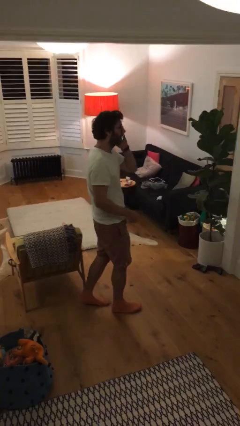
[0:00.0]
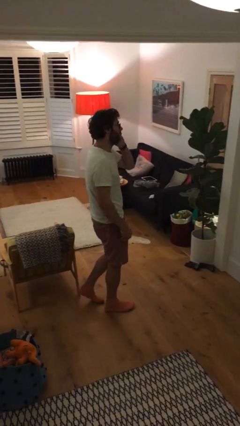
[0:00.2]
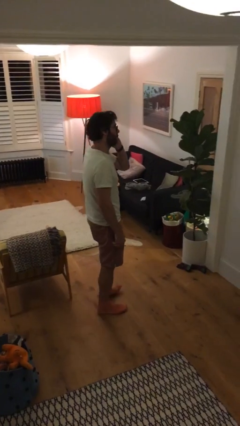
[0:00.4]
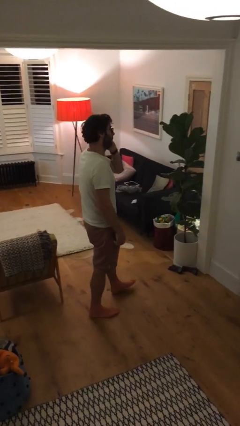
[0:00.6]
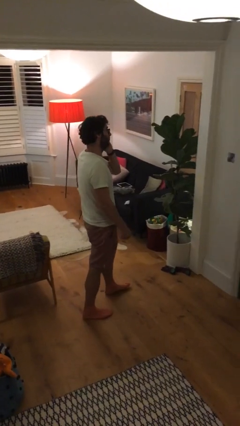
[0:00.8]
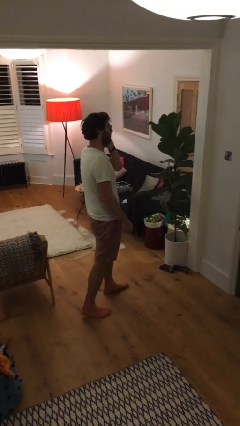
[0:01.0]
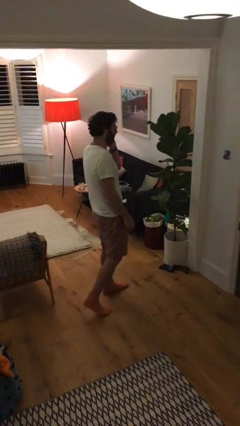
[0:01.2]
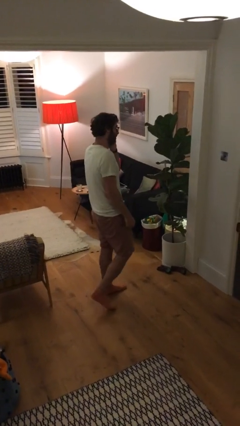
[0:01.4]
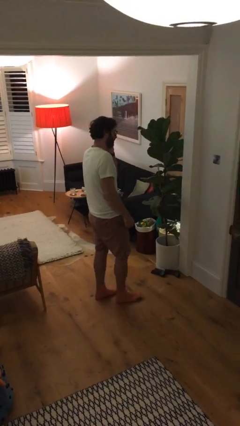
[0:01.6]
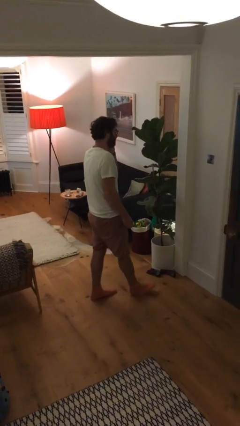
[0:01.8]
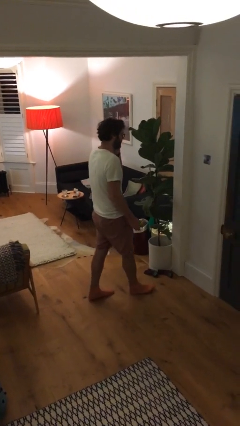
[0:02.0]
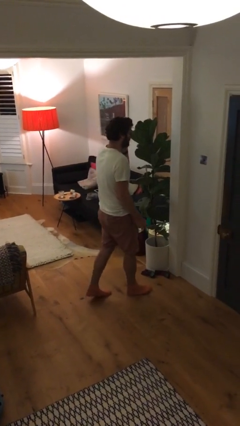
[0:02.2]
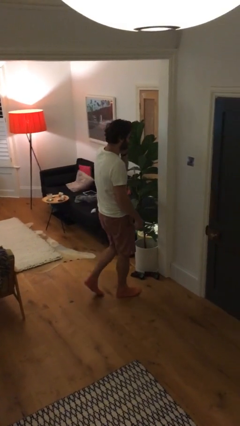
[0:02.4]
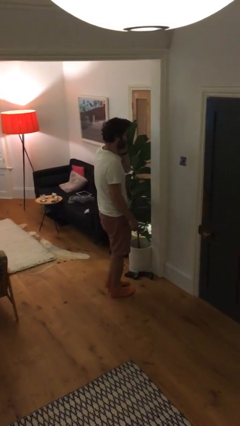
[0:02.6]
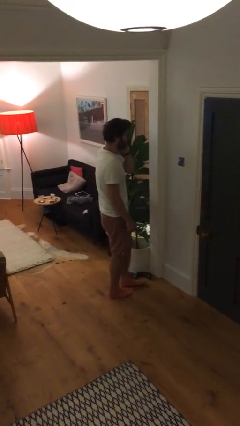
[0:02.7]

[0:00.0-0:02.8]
person talks on phone

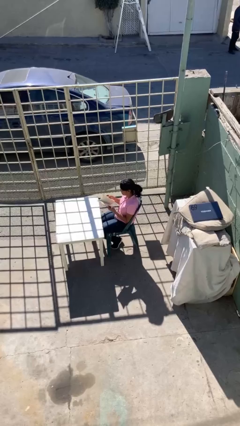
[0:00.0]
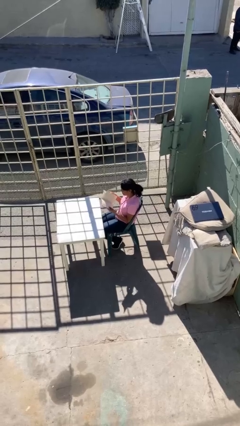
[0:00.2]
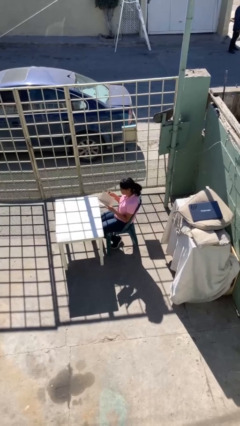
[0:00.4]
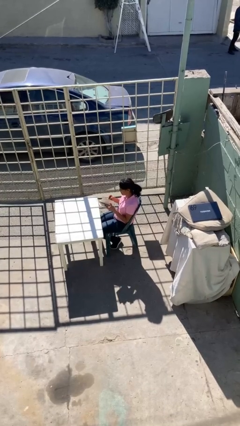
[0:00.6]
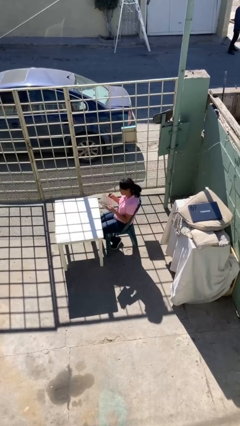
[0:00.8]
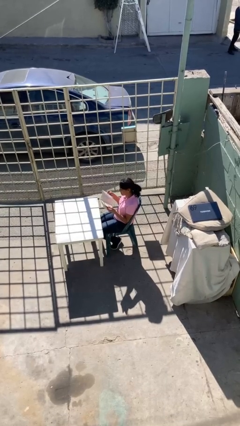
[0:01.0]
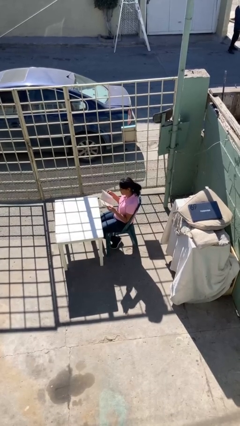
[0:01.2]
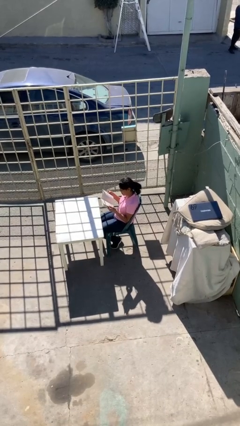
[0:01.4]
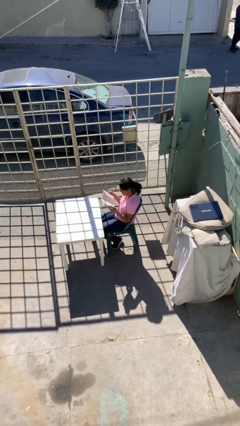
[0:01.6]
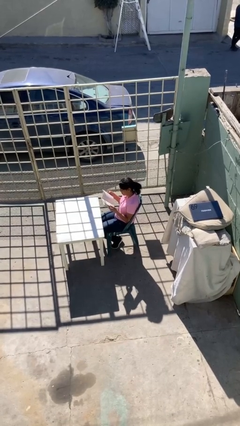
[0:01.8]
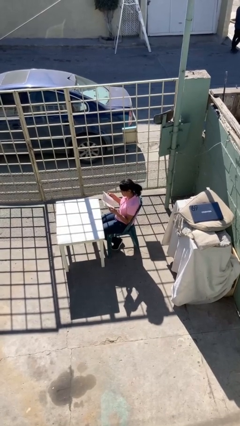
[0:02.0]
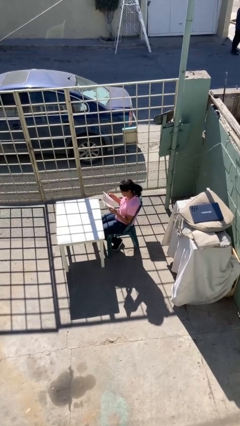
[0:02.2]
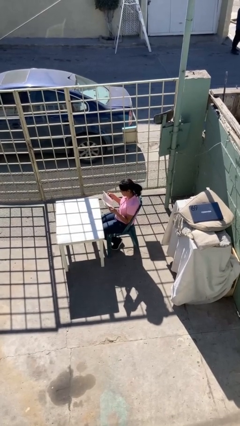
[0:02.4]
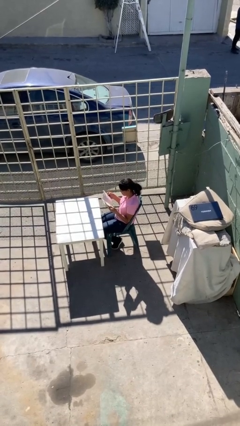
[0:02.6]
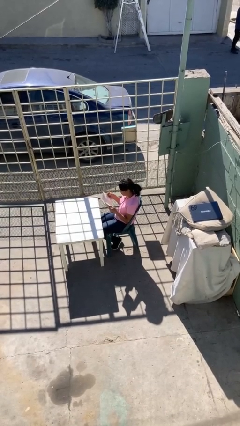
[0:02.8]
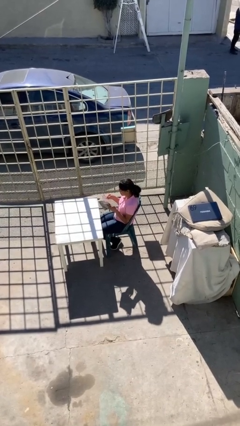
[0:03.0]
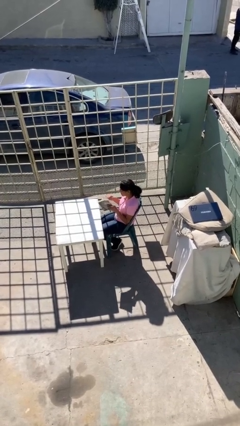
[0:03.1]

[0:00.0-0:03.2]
person reads document

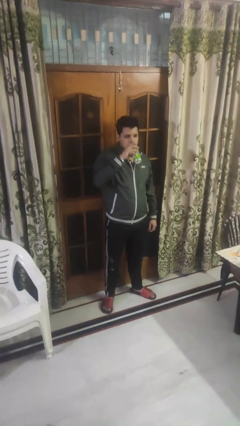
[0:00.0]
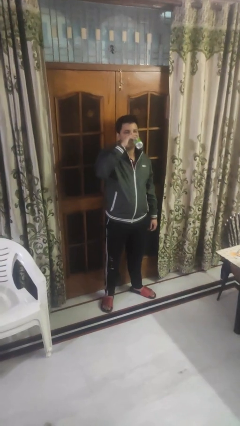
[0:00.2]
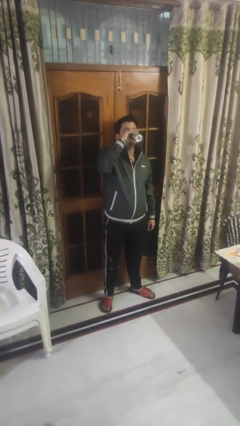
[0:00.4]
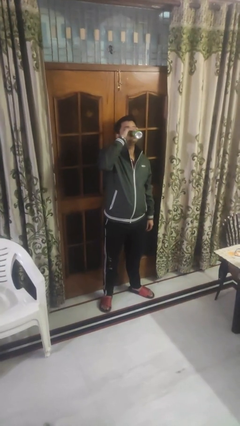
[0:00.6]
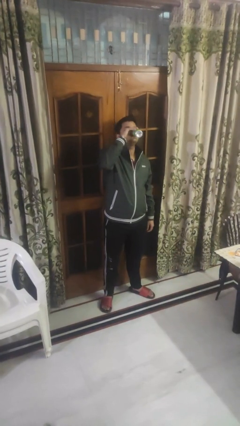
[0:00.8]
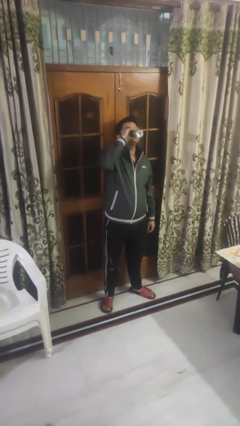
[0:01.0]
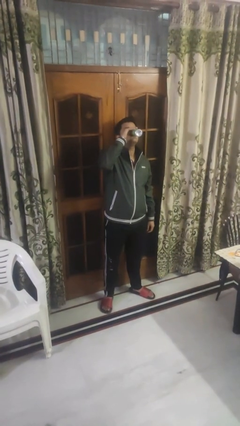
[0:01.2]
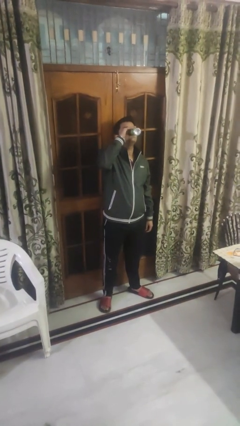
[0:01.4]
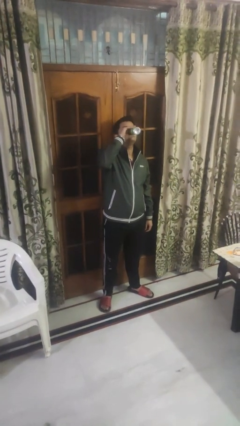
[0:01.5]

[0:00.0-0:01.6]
person drinks from beverage can

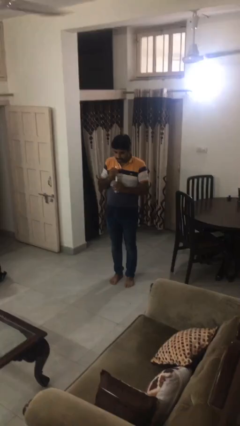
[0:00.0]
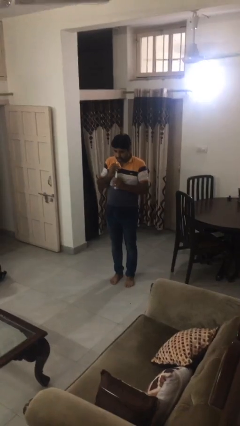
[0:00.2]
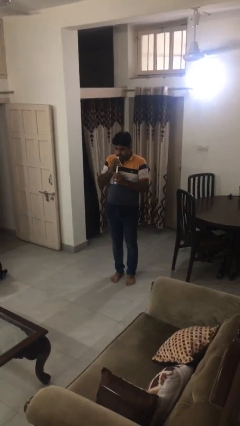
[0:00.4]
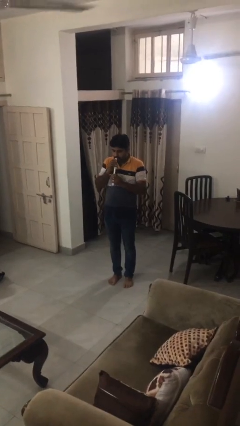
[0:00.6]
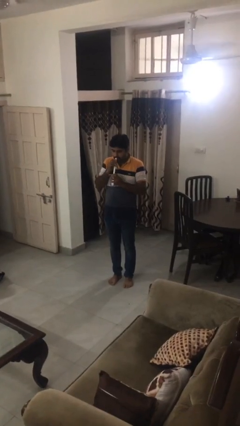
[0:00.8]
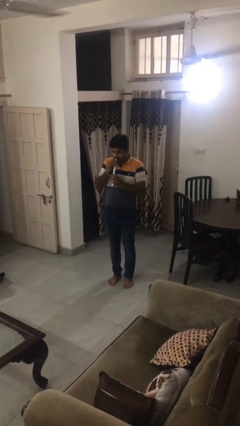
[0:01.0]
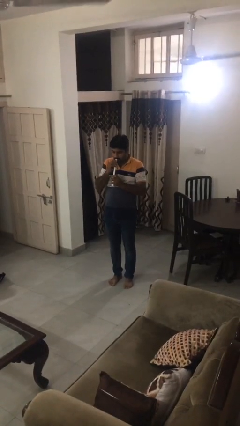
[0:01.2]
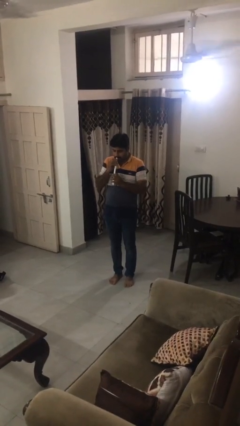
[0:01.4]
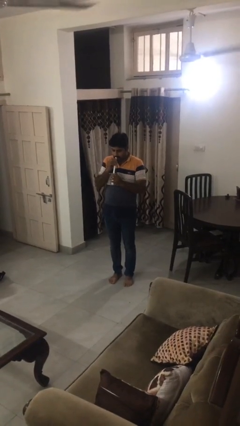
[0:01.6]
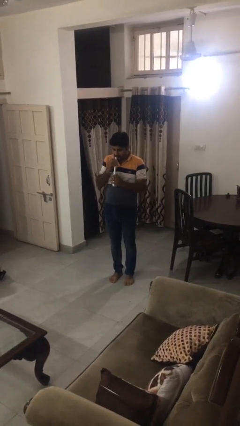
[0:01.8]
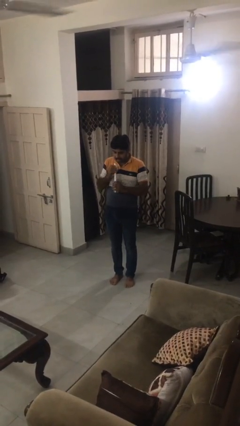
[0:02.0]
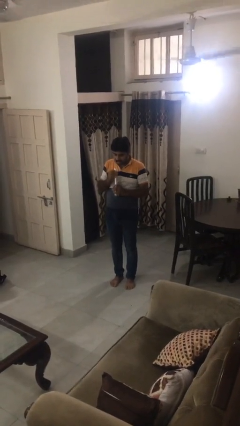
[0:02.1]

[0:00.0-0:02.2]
person drinks from straw

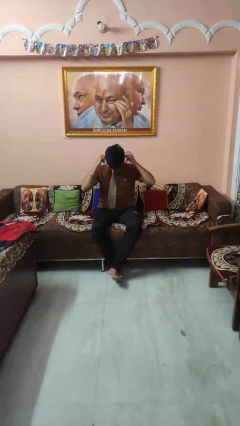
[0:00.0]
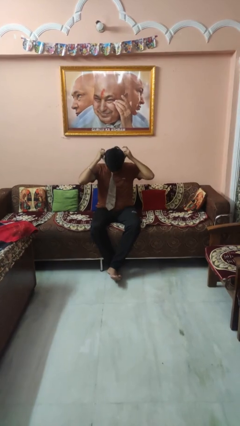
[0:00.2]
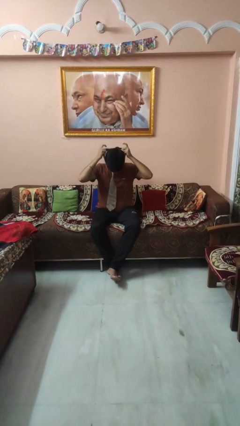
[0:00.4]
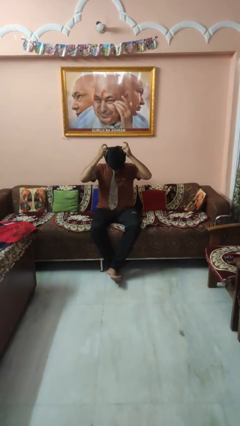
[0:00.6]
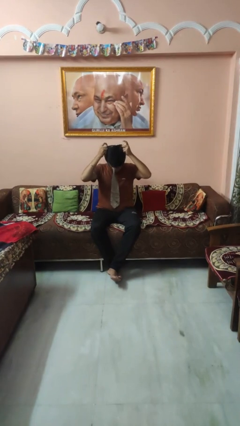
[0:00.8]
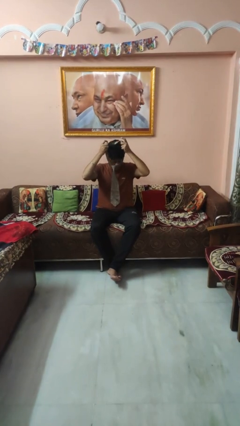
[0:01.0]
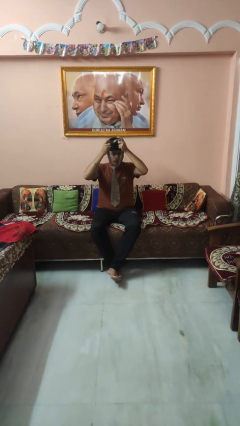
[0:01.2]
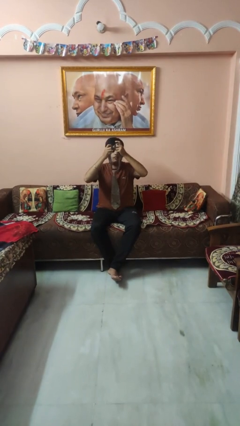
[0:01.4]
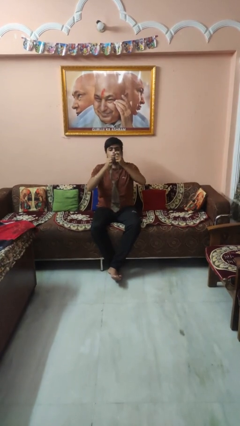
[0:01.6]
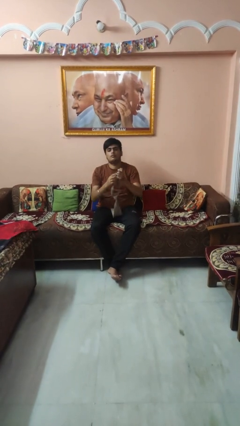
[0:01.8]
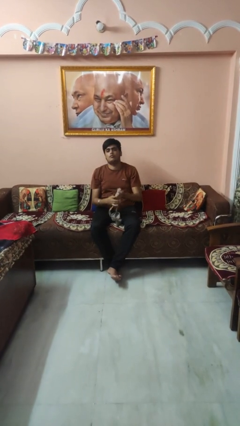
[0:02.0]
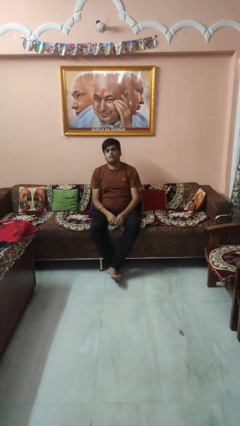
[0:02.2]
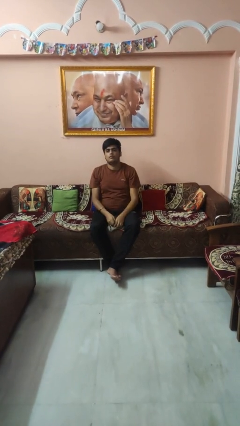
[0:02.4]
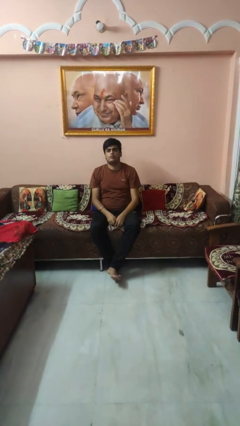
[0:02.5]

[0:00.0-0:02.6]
person takes off necktie

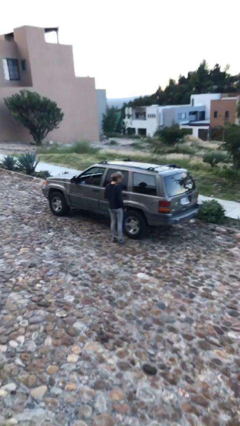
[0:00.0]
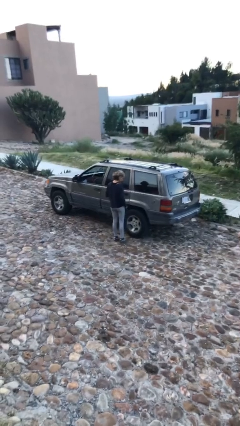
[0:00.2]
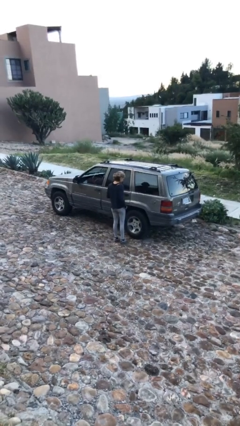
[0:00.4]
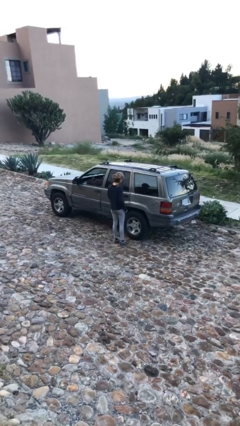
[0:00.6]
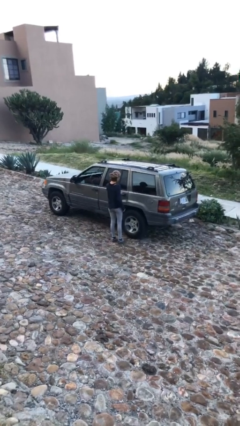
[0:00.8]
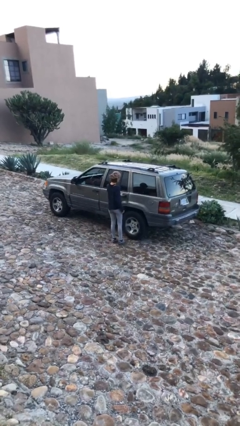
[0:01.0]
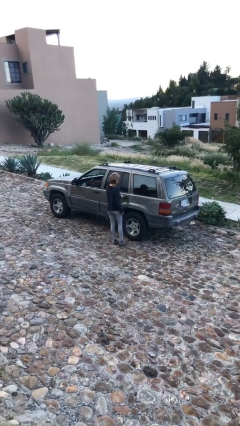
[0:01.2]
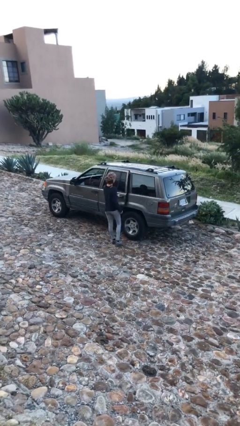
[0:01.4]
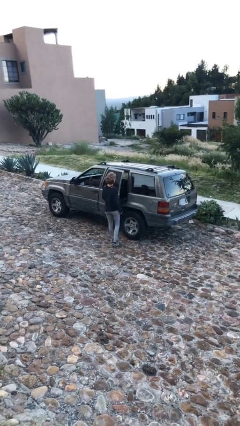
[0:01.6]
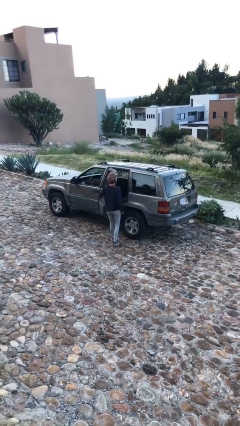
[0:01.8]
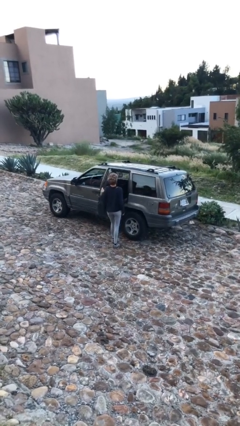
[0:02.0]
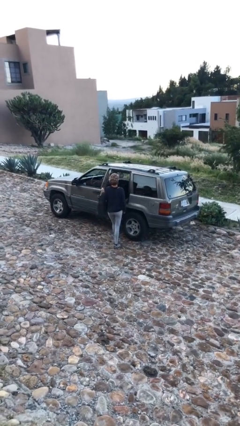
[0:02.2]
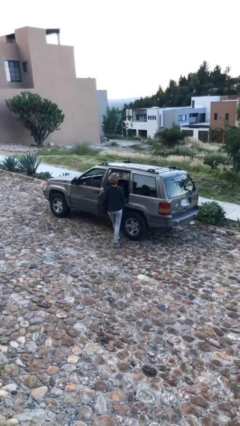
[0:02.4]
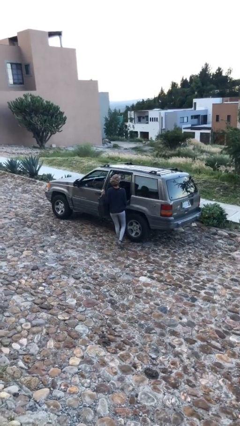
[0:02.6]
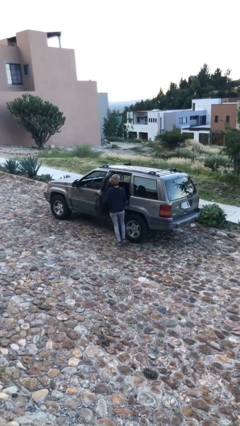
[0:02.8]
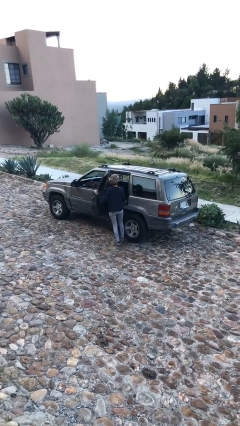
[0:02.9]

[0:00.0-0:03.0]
person opens car door

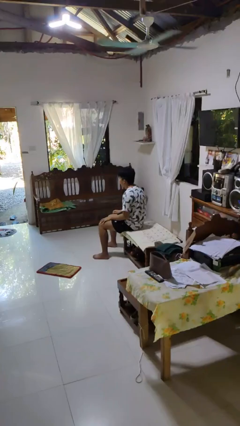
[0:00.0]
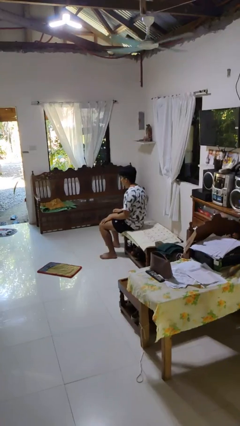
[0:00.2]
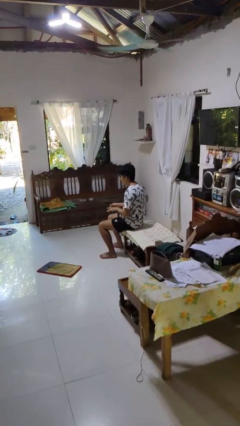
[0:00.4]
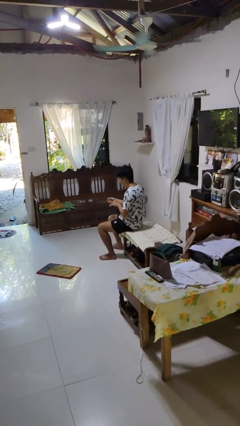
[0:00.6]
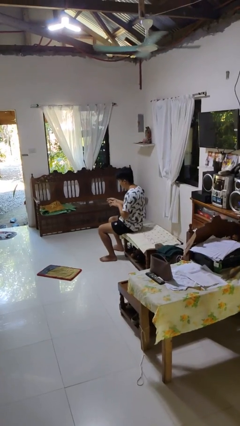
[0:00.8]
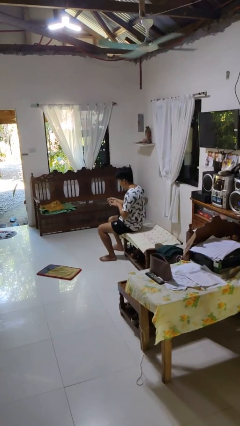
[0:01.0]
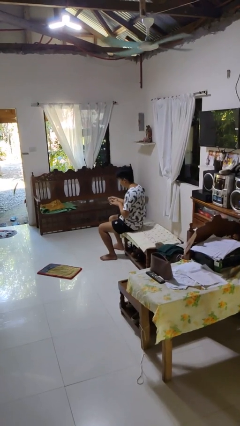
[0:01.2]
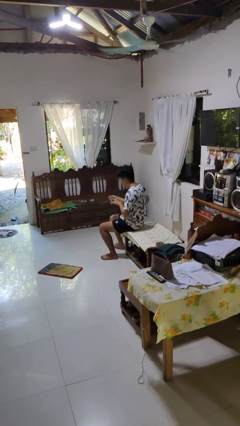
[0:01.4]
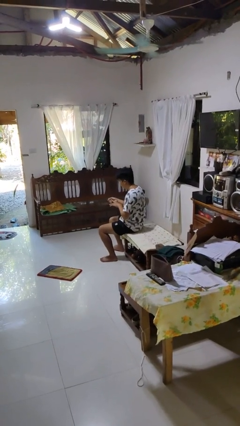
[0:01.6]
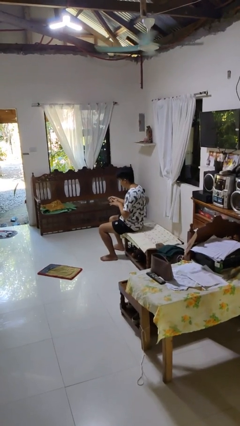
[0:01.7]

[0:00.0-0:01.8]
person clips fingernails
